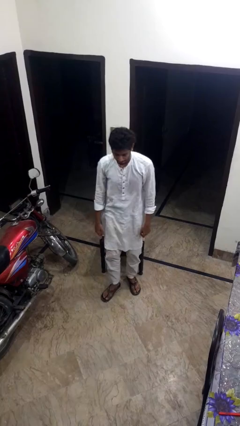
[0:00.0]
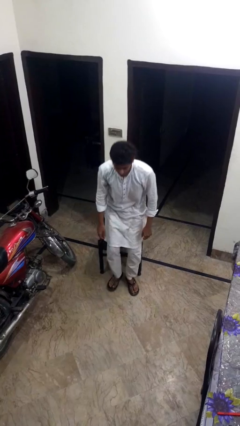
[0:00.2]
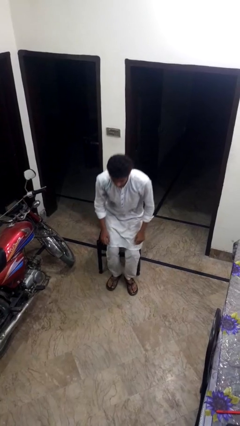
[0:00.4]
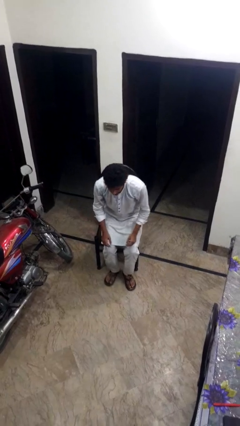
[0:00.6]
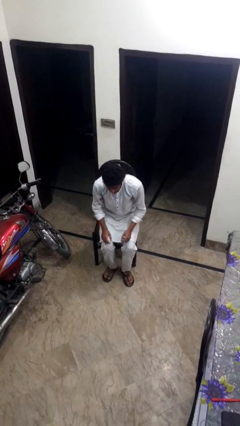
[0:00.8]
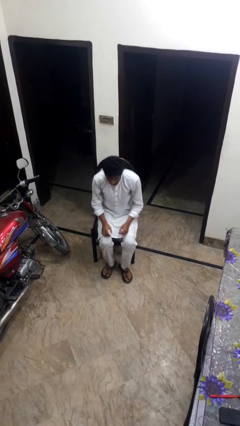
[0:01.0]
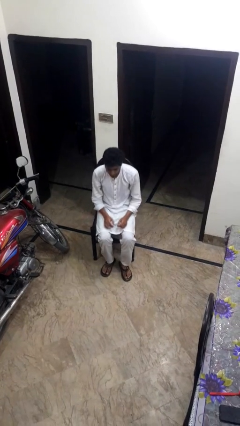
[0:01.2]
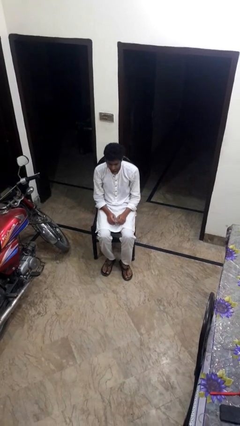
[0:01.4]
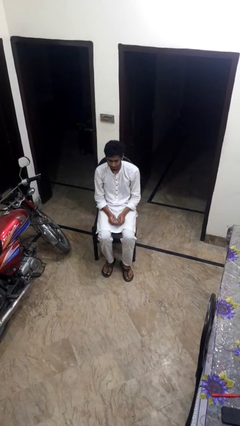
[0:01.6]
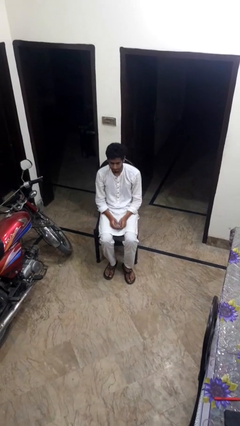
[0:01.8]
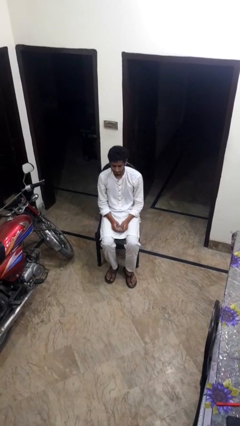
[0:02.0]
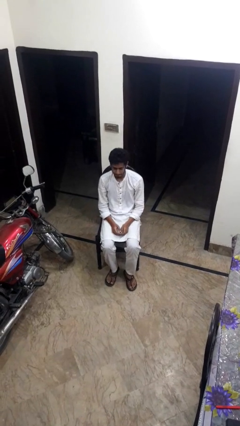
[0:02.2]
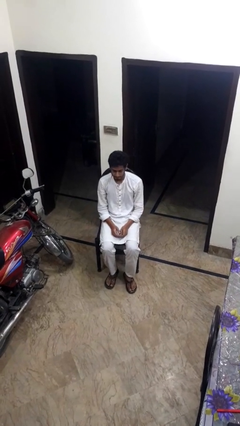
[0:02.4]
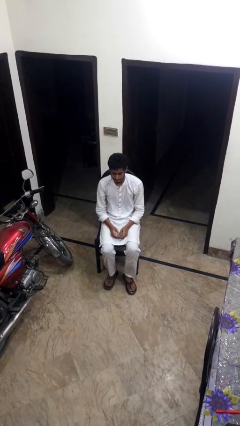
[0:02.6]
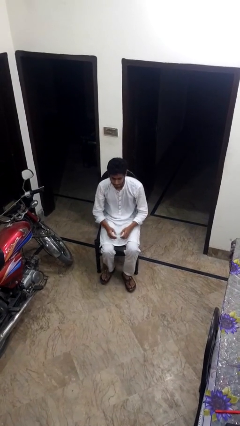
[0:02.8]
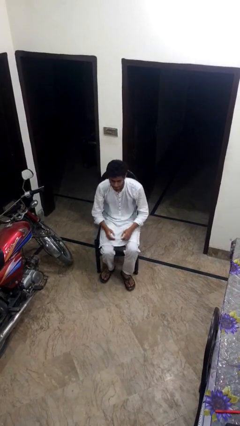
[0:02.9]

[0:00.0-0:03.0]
person sits down

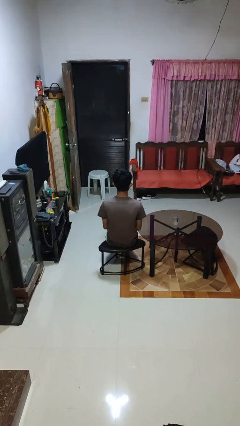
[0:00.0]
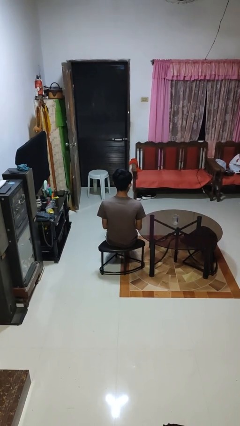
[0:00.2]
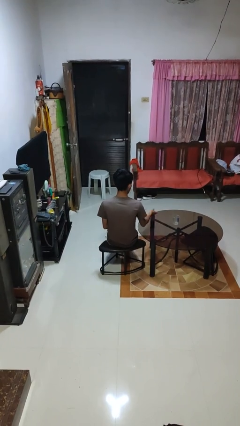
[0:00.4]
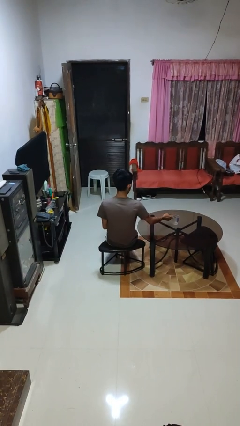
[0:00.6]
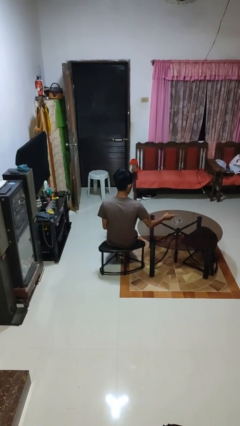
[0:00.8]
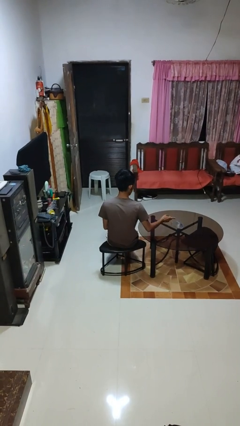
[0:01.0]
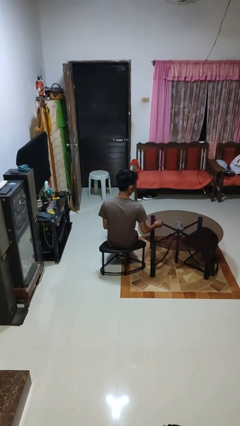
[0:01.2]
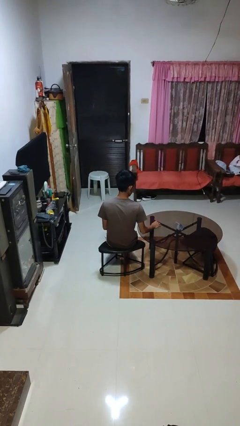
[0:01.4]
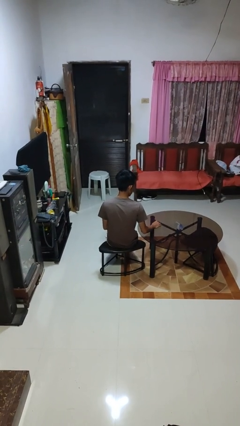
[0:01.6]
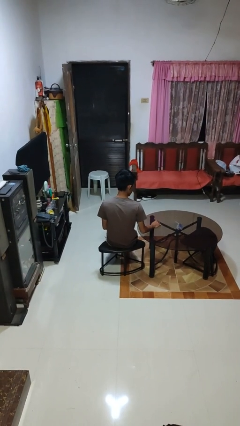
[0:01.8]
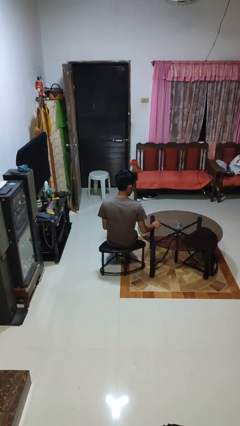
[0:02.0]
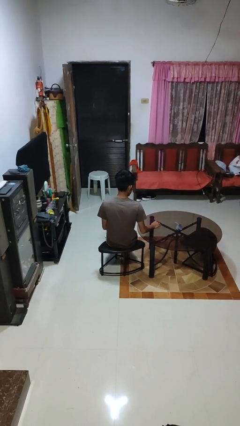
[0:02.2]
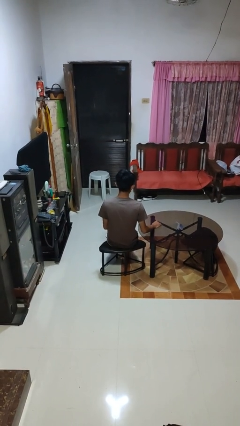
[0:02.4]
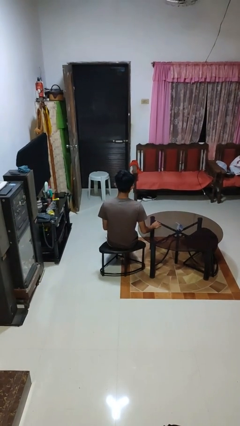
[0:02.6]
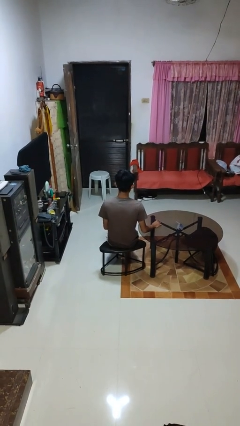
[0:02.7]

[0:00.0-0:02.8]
person spills on table

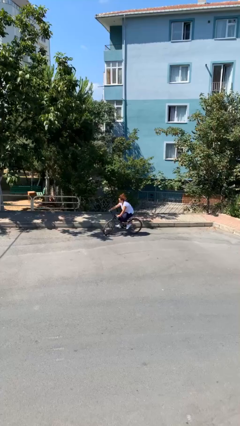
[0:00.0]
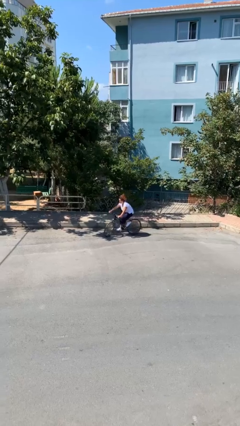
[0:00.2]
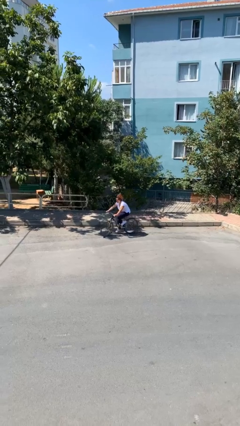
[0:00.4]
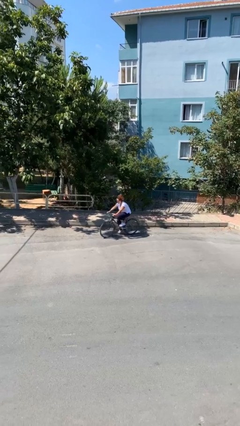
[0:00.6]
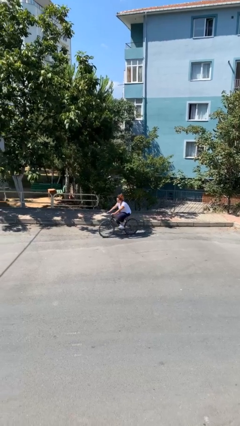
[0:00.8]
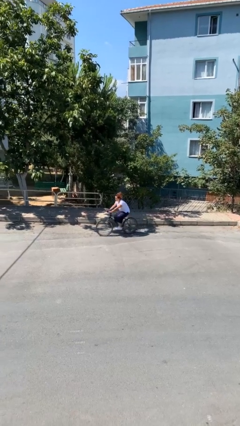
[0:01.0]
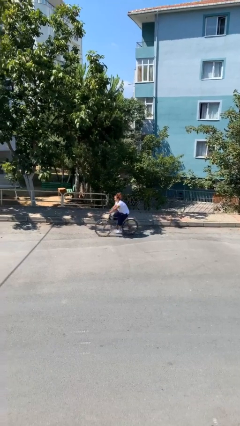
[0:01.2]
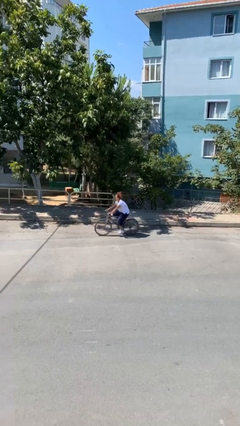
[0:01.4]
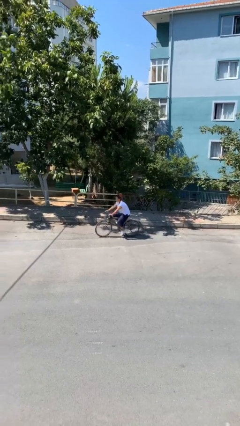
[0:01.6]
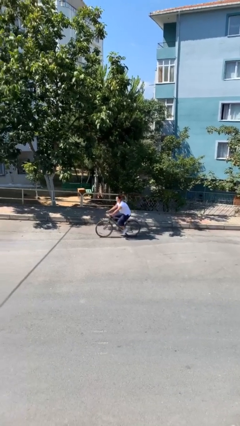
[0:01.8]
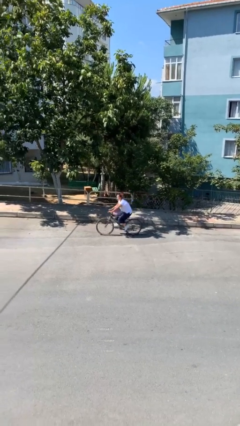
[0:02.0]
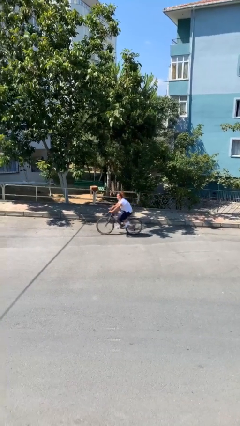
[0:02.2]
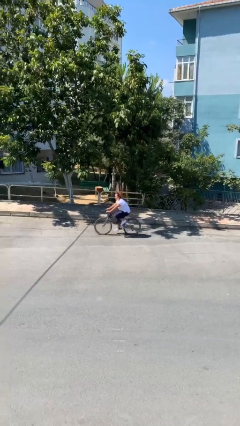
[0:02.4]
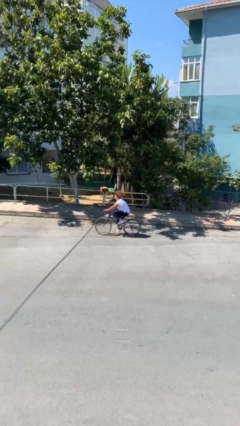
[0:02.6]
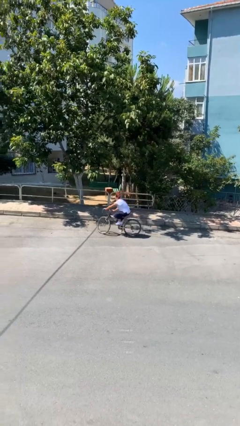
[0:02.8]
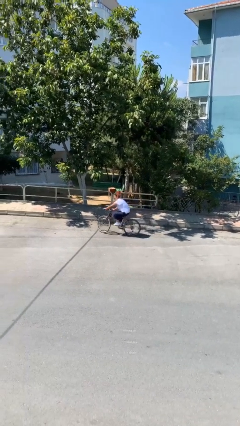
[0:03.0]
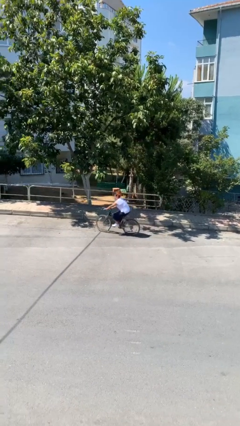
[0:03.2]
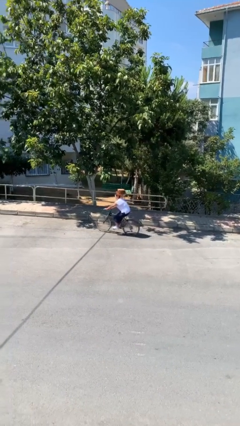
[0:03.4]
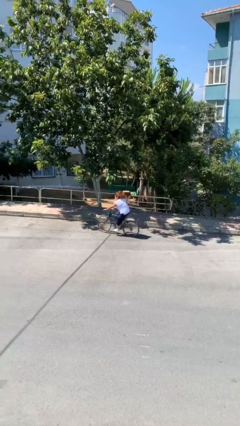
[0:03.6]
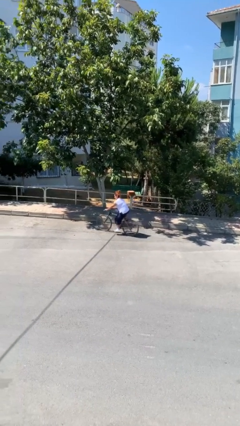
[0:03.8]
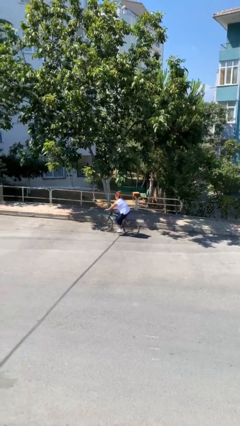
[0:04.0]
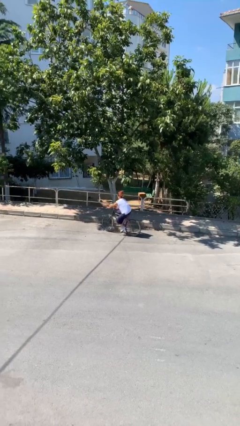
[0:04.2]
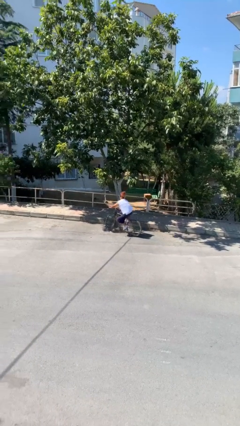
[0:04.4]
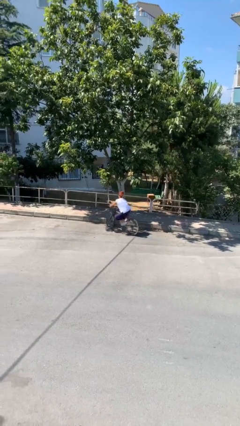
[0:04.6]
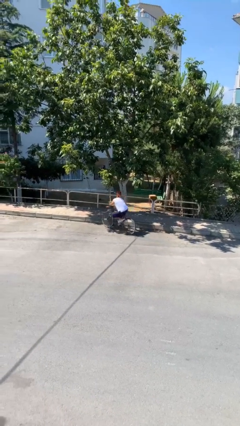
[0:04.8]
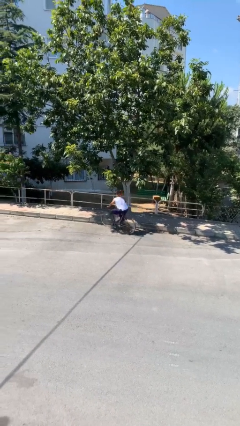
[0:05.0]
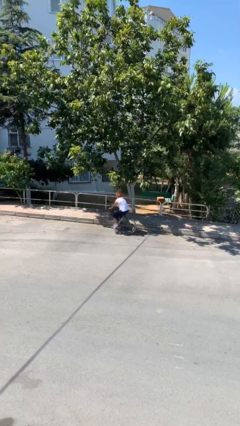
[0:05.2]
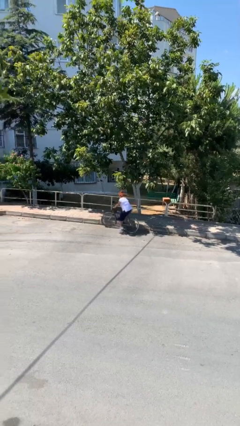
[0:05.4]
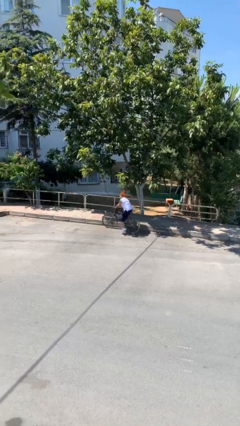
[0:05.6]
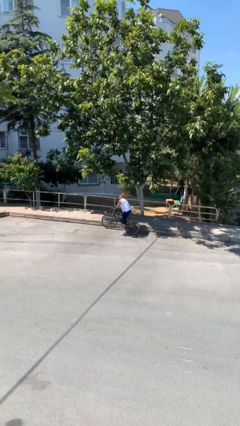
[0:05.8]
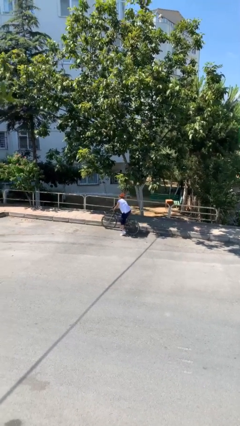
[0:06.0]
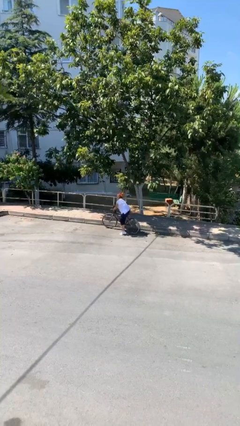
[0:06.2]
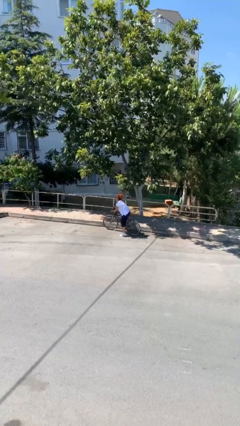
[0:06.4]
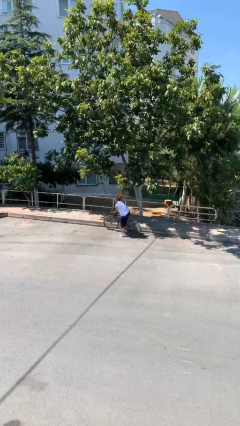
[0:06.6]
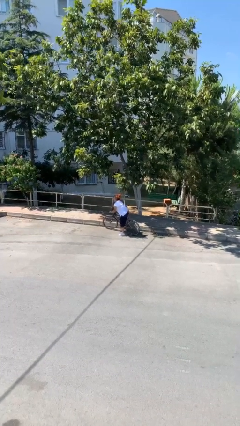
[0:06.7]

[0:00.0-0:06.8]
person rides bicycle

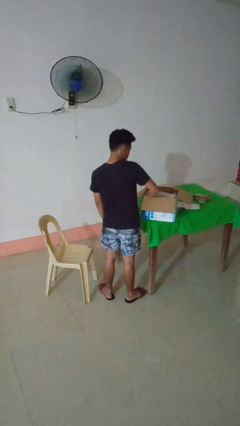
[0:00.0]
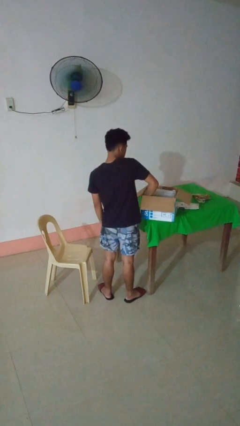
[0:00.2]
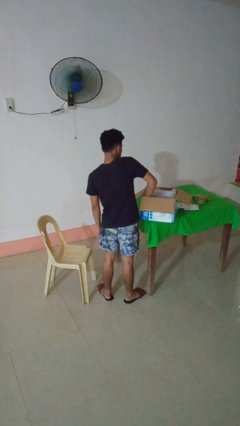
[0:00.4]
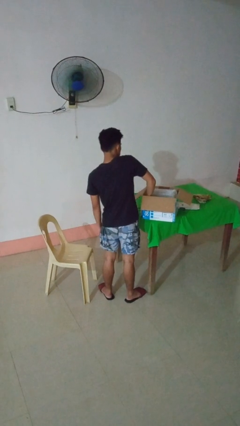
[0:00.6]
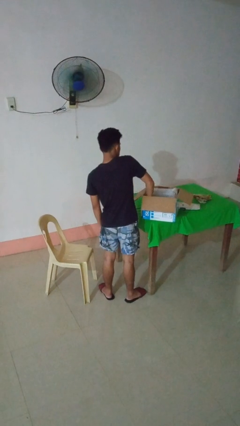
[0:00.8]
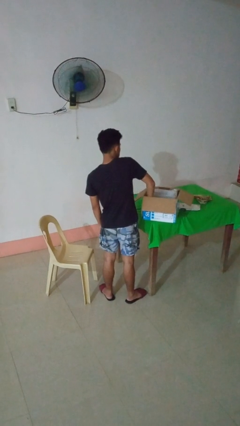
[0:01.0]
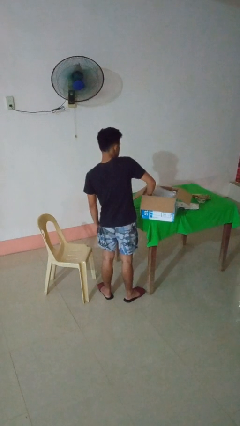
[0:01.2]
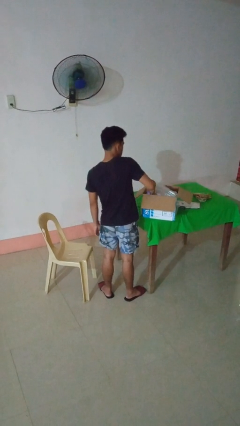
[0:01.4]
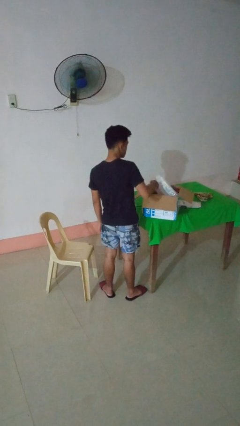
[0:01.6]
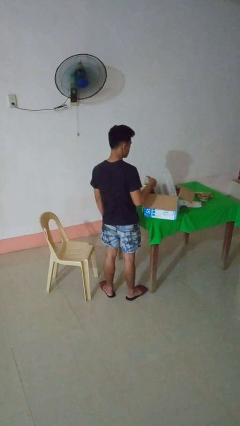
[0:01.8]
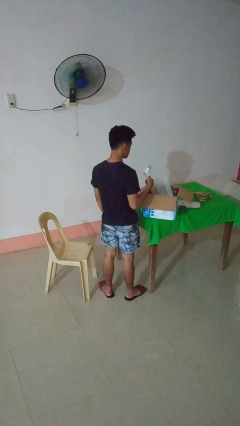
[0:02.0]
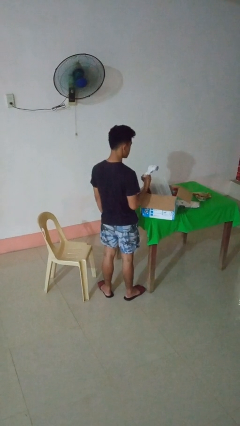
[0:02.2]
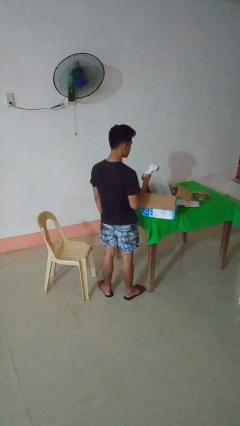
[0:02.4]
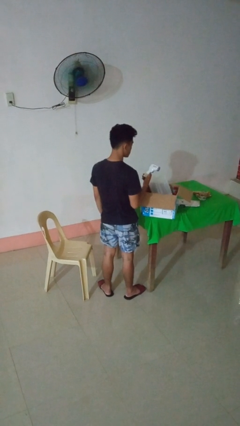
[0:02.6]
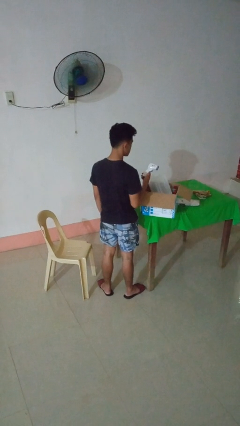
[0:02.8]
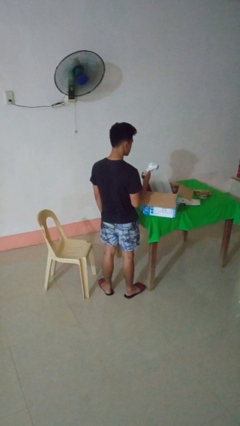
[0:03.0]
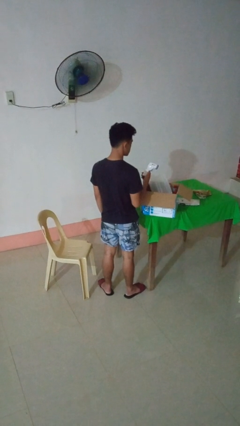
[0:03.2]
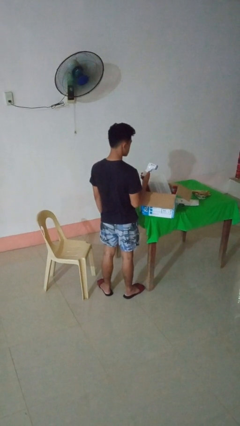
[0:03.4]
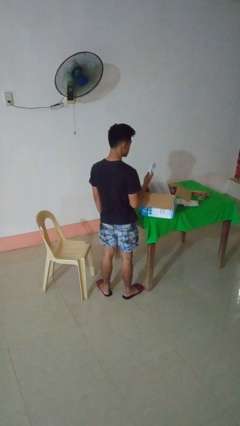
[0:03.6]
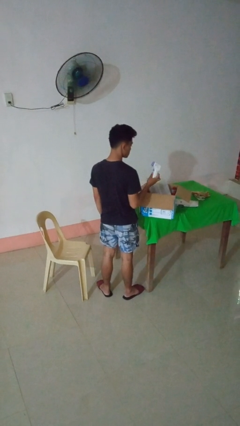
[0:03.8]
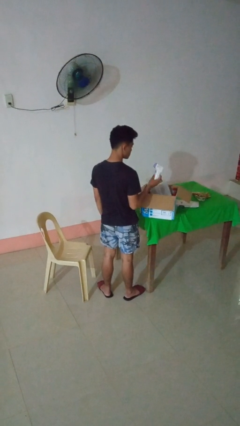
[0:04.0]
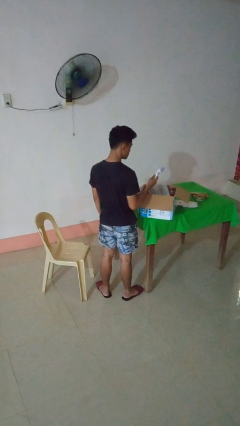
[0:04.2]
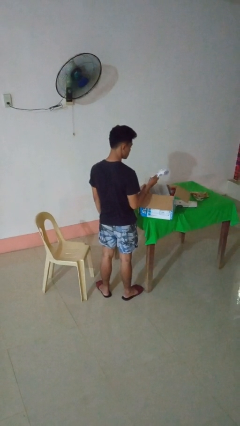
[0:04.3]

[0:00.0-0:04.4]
person takes object from box

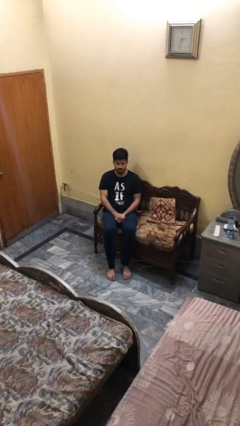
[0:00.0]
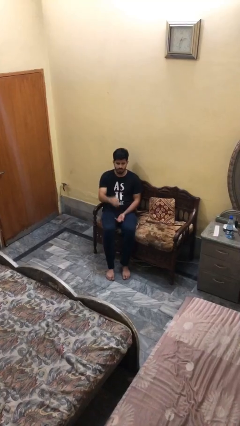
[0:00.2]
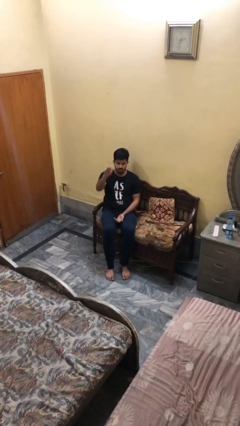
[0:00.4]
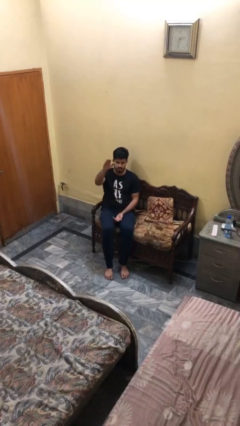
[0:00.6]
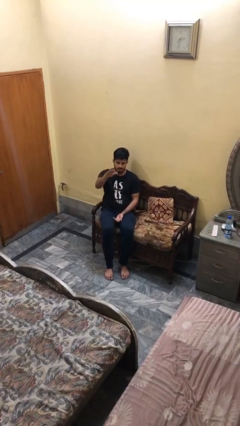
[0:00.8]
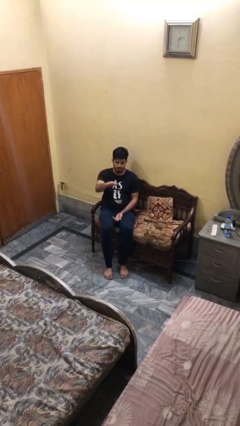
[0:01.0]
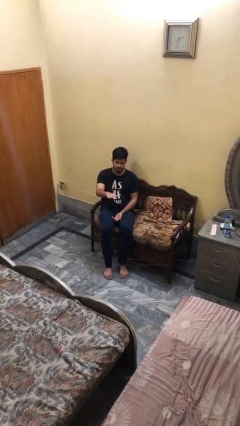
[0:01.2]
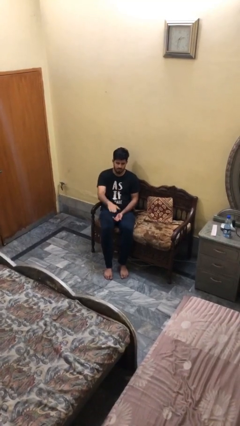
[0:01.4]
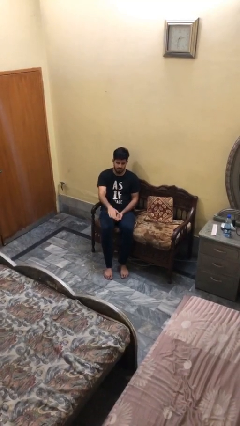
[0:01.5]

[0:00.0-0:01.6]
person gestures swipe down
